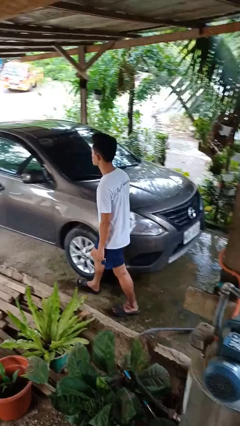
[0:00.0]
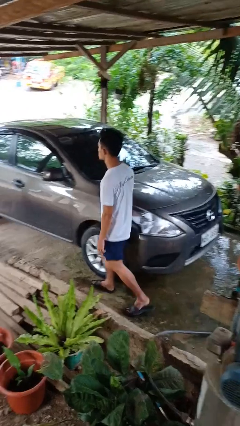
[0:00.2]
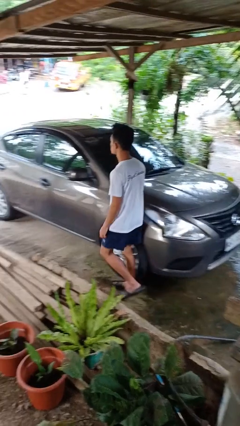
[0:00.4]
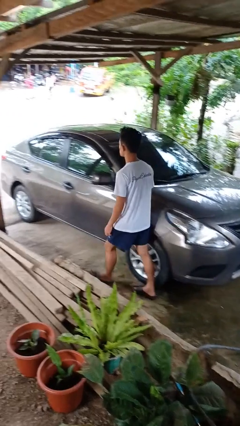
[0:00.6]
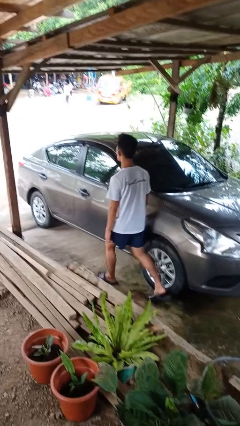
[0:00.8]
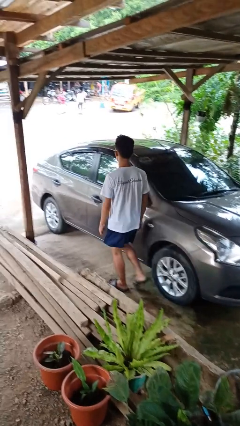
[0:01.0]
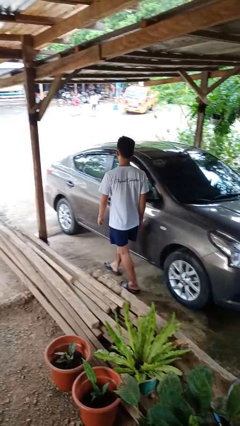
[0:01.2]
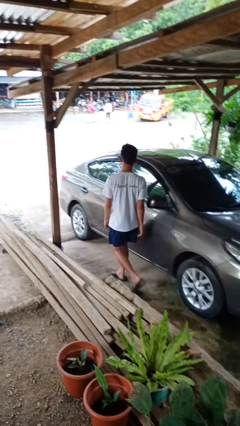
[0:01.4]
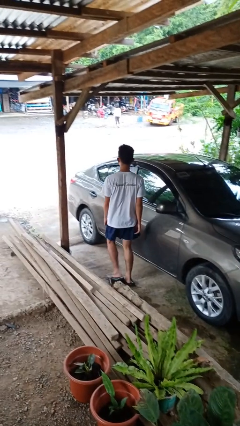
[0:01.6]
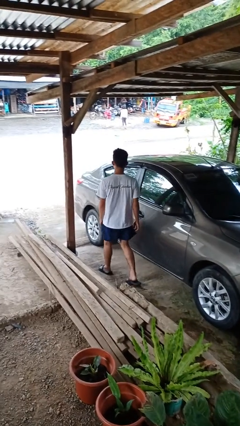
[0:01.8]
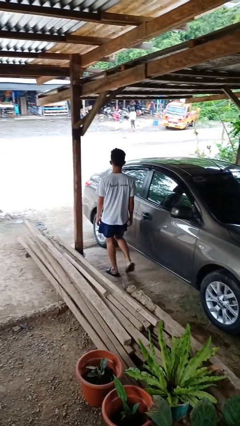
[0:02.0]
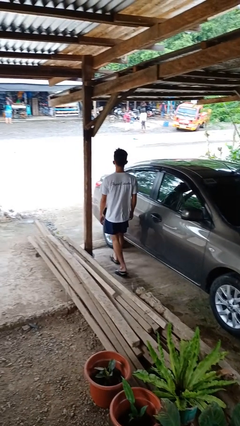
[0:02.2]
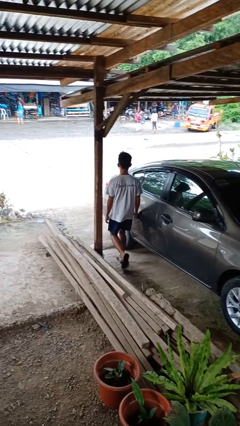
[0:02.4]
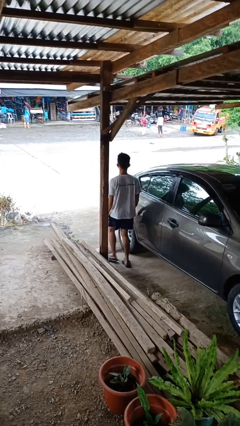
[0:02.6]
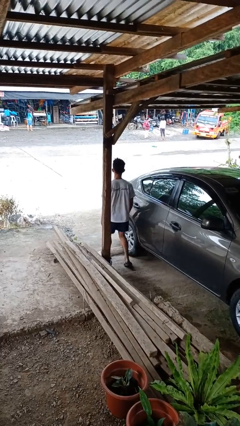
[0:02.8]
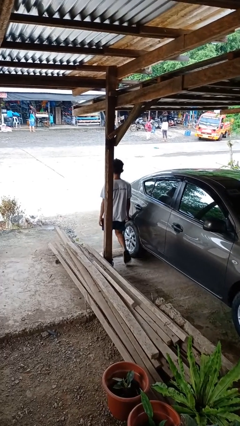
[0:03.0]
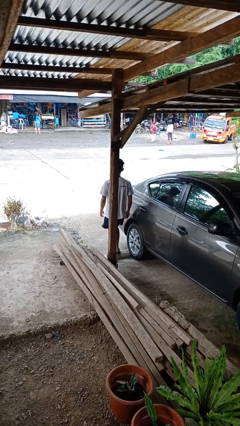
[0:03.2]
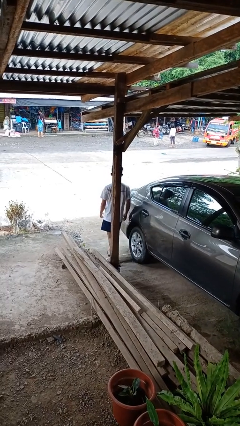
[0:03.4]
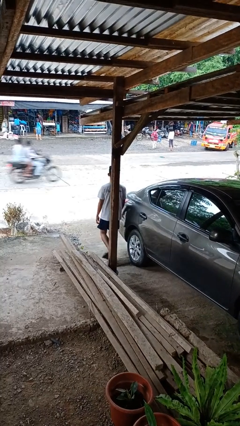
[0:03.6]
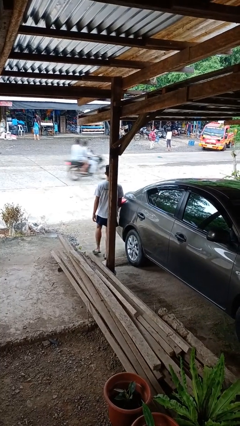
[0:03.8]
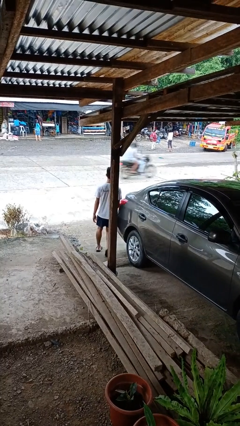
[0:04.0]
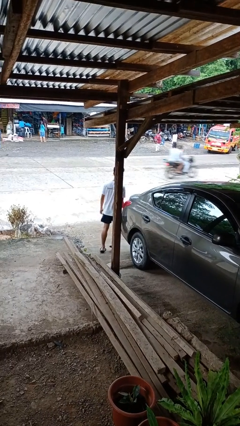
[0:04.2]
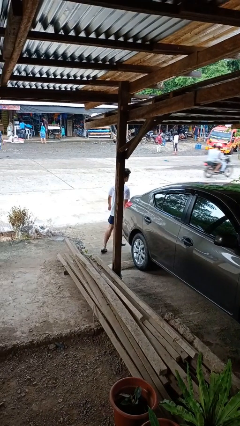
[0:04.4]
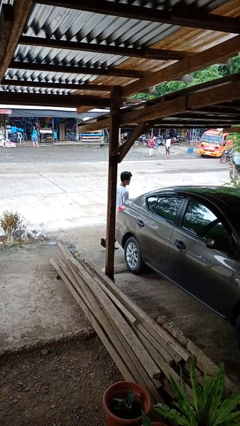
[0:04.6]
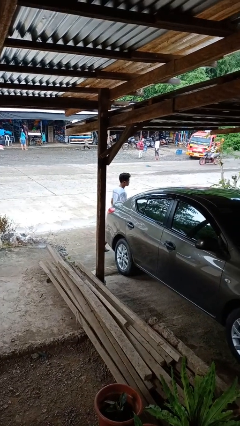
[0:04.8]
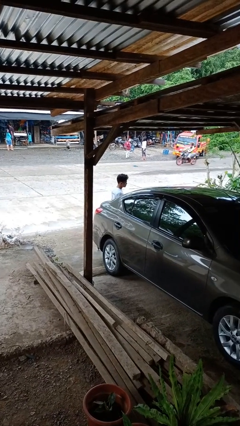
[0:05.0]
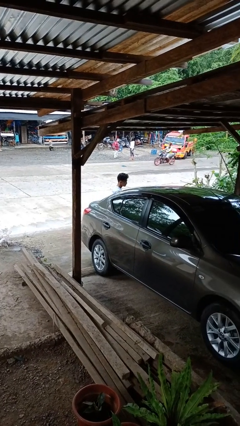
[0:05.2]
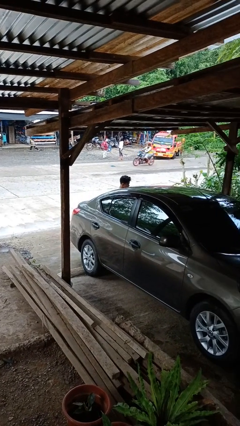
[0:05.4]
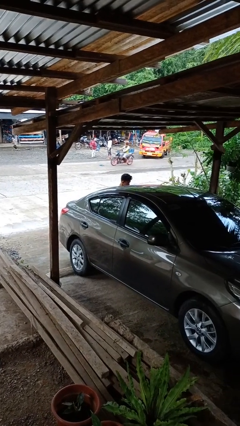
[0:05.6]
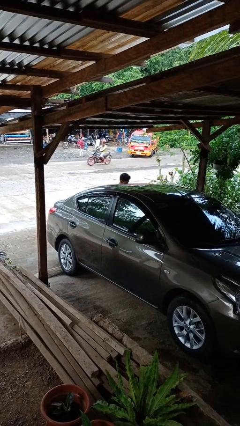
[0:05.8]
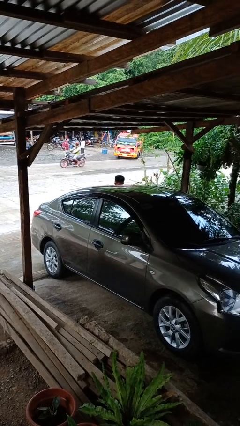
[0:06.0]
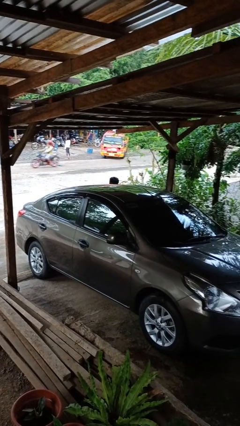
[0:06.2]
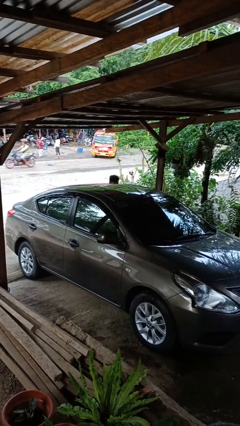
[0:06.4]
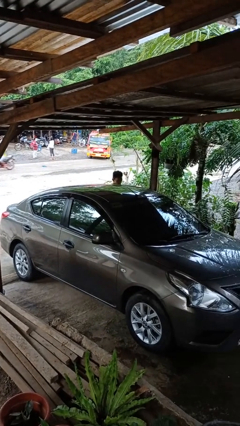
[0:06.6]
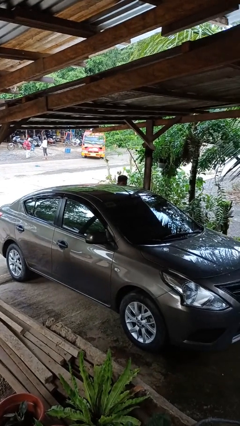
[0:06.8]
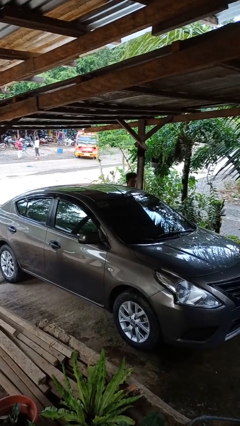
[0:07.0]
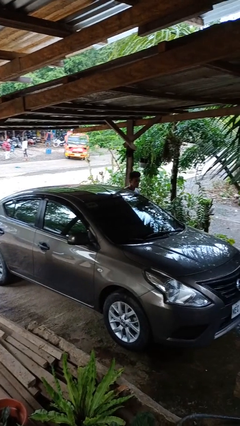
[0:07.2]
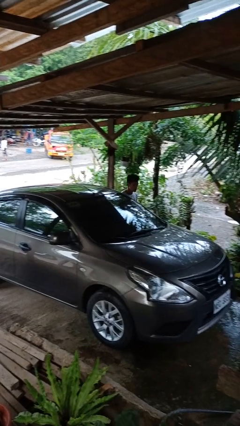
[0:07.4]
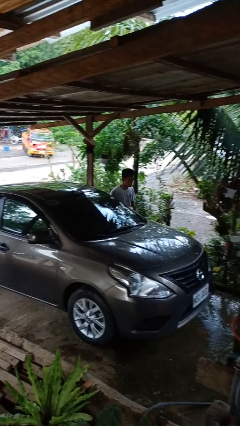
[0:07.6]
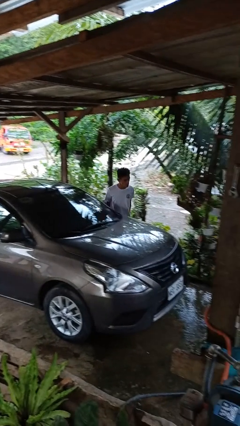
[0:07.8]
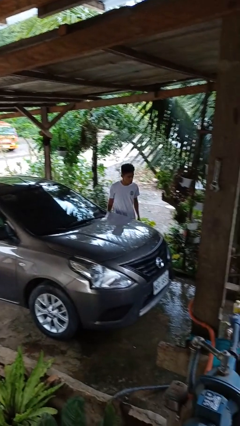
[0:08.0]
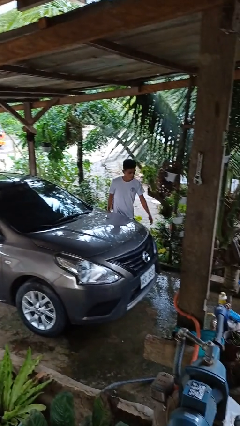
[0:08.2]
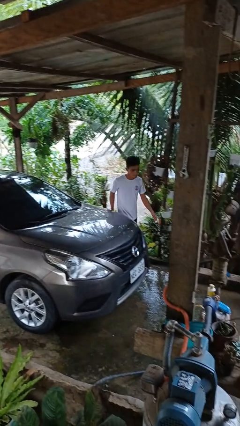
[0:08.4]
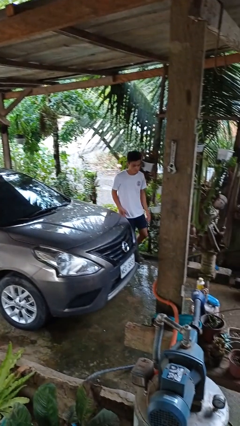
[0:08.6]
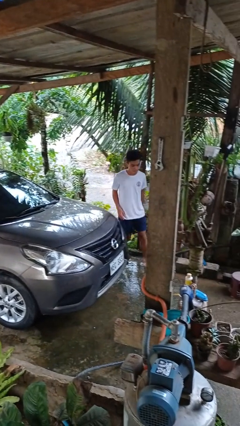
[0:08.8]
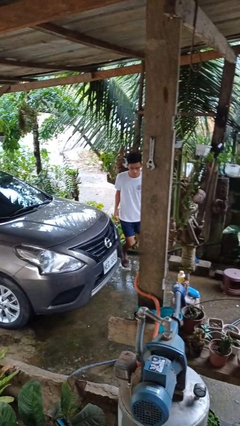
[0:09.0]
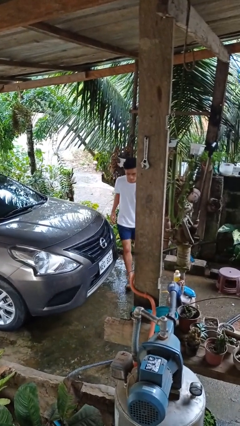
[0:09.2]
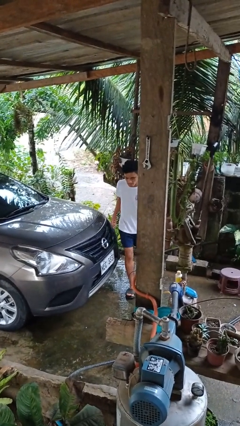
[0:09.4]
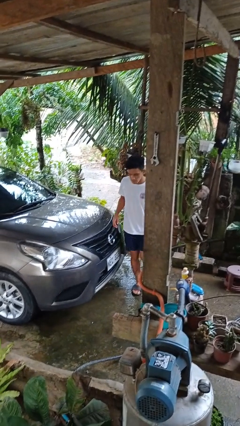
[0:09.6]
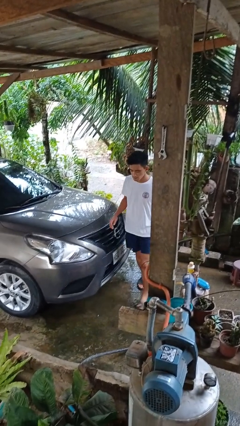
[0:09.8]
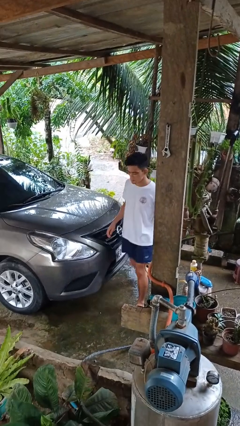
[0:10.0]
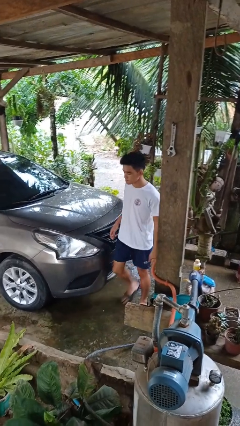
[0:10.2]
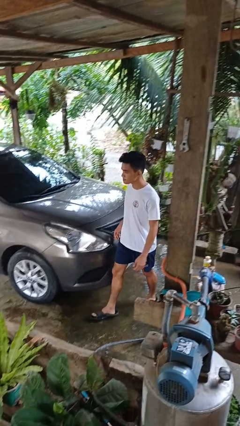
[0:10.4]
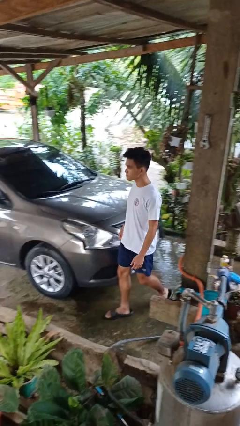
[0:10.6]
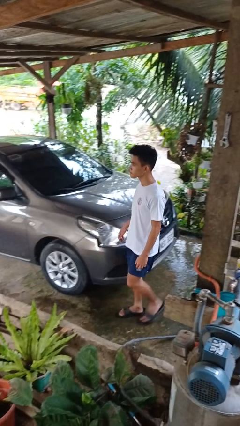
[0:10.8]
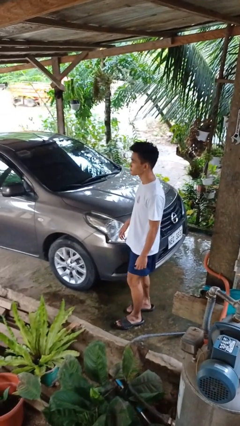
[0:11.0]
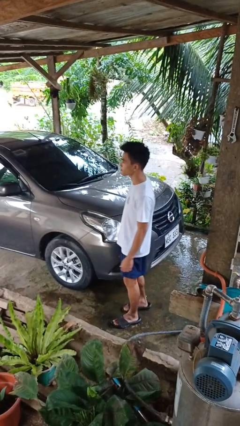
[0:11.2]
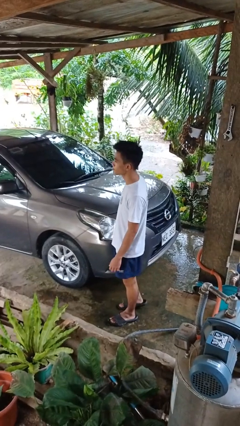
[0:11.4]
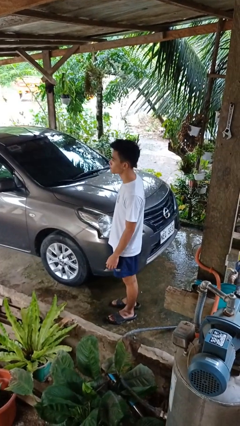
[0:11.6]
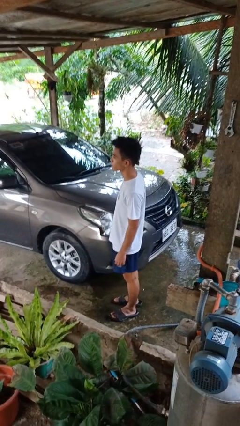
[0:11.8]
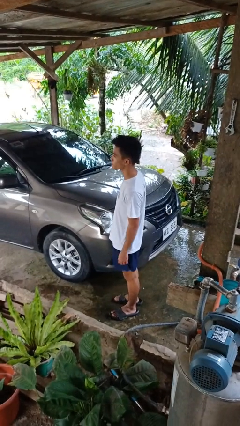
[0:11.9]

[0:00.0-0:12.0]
person walks around car

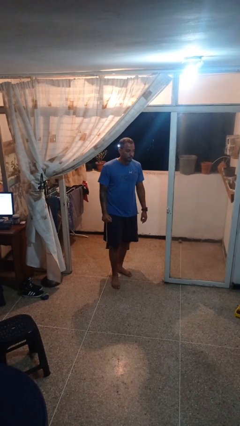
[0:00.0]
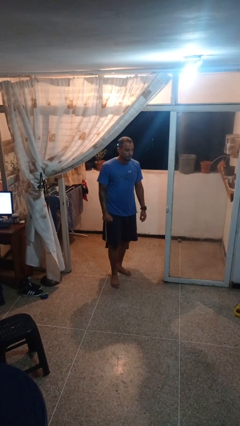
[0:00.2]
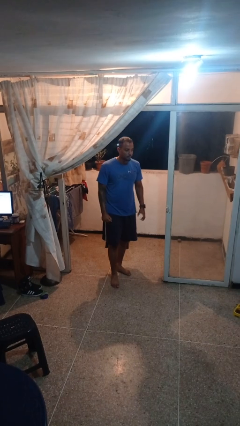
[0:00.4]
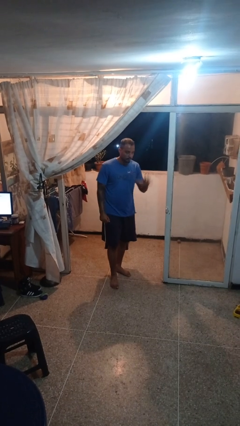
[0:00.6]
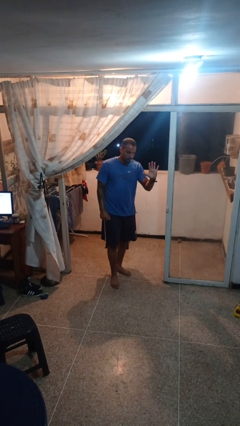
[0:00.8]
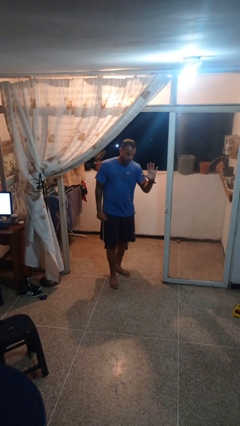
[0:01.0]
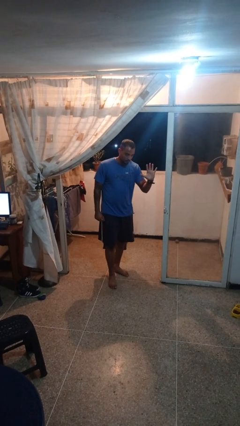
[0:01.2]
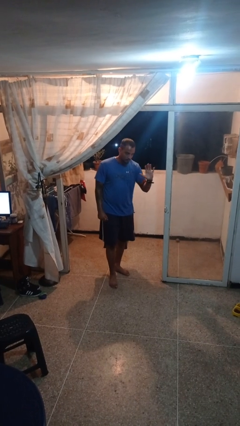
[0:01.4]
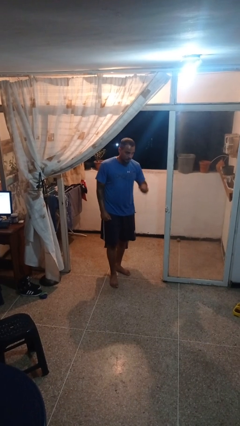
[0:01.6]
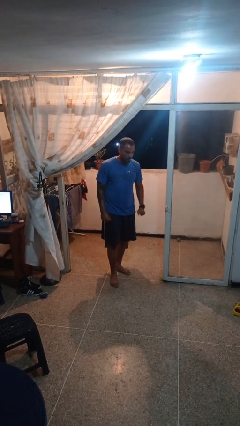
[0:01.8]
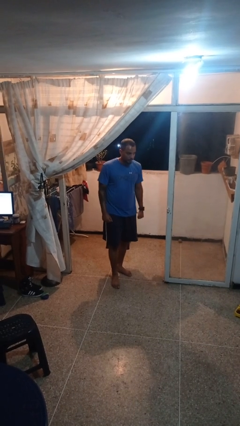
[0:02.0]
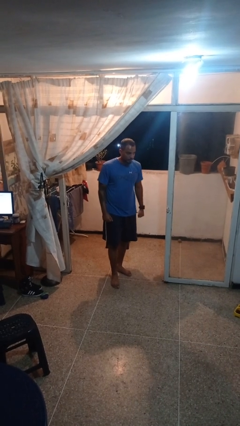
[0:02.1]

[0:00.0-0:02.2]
person gestures number five

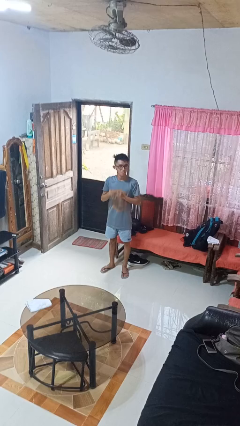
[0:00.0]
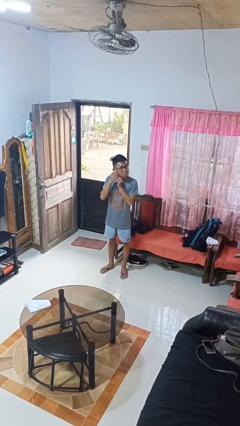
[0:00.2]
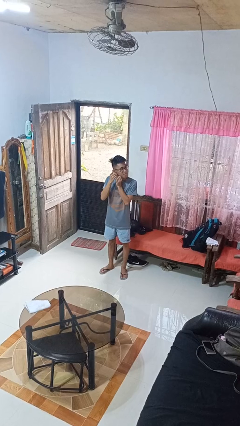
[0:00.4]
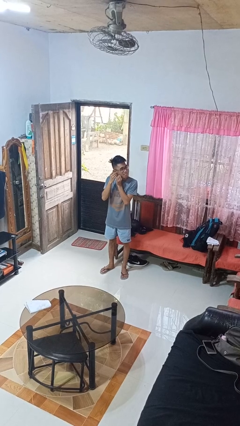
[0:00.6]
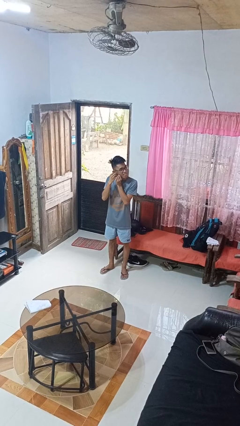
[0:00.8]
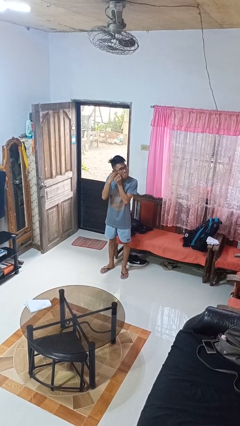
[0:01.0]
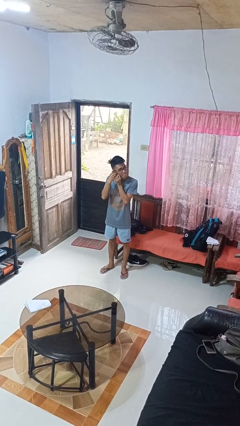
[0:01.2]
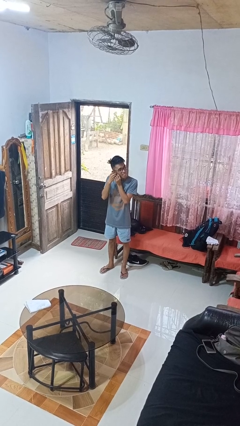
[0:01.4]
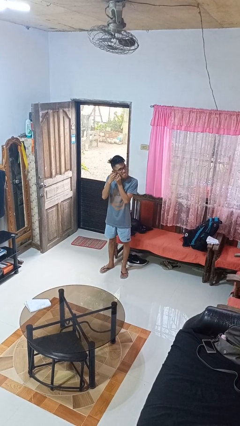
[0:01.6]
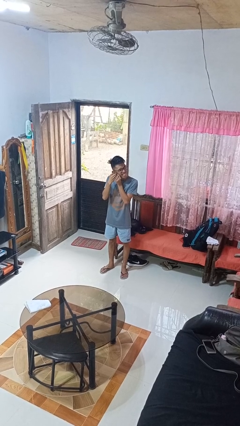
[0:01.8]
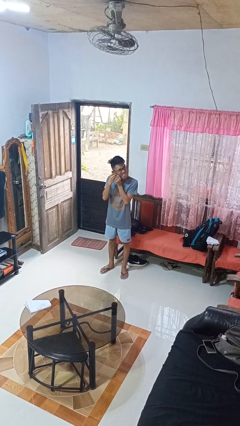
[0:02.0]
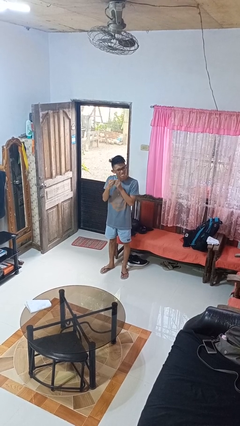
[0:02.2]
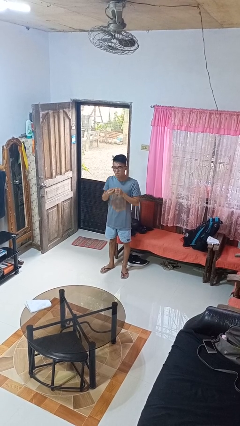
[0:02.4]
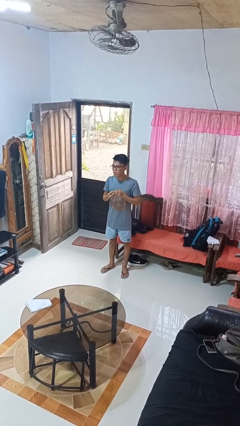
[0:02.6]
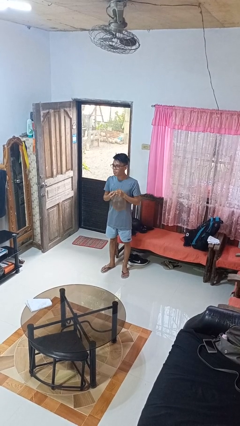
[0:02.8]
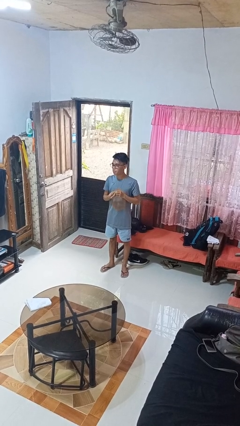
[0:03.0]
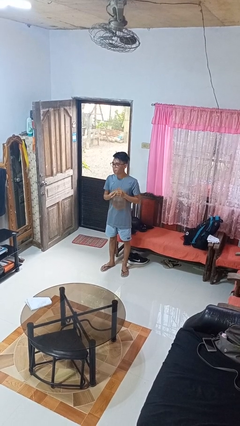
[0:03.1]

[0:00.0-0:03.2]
person takes off earrings

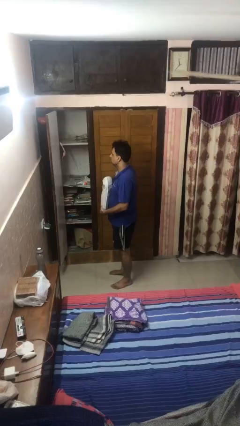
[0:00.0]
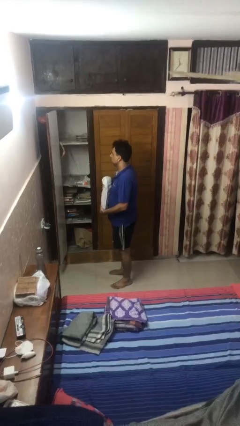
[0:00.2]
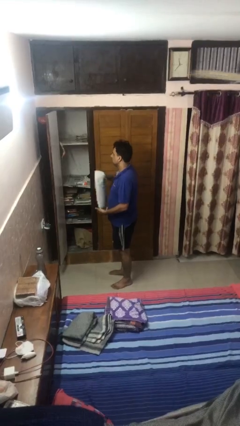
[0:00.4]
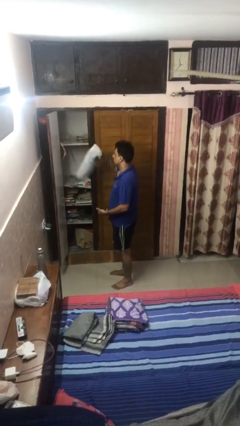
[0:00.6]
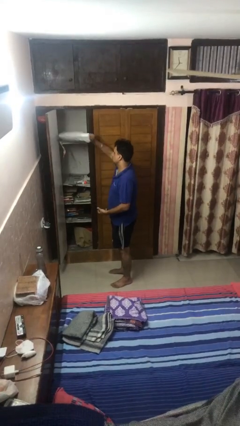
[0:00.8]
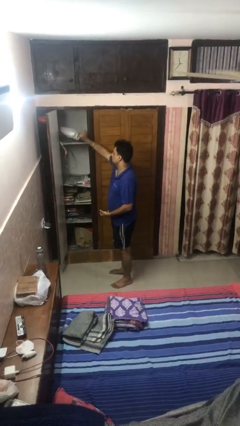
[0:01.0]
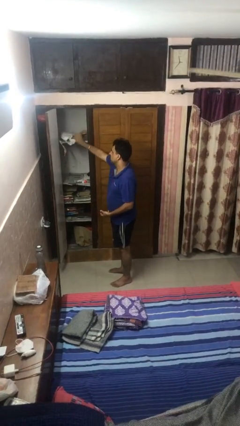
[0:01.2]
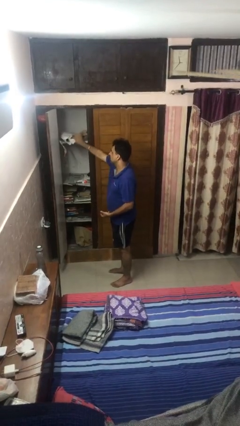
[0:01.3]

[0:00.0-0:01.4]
person puts down object on shelf
